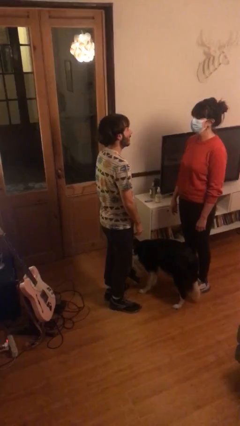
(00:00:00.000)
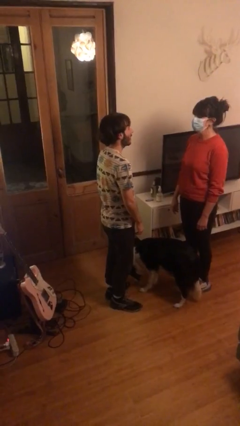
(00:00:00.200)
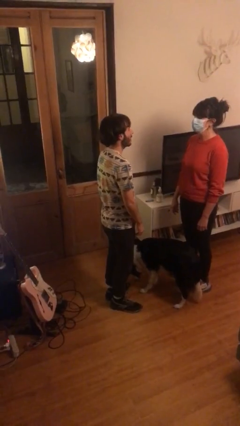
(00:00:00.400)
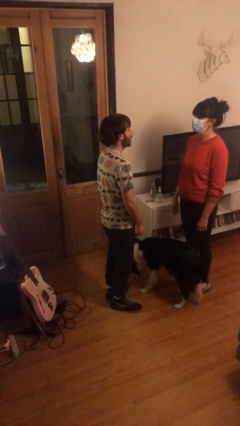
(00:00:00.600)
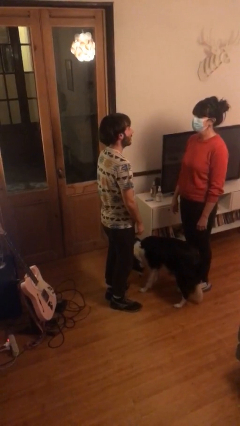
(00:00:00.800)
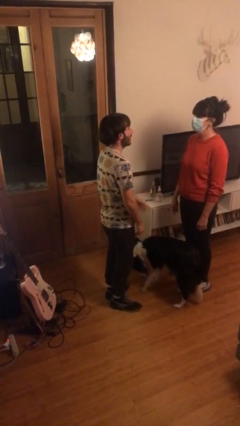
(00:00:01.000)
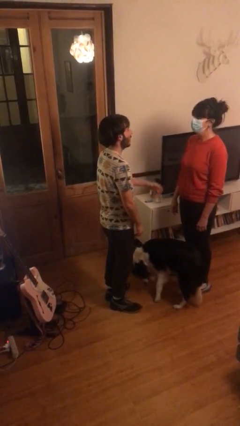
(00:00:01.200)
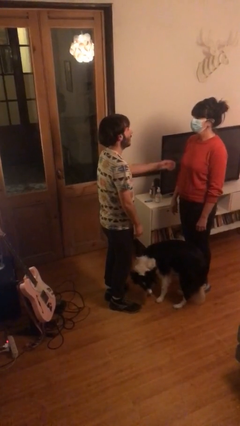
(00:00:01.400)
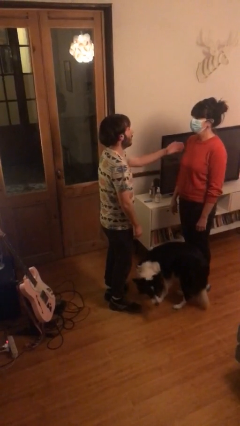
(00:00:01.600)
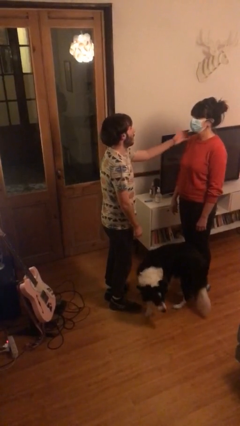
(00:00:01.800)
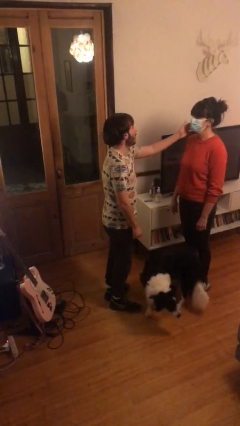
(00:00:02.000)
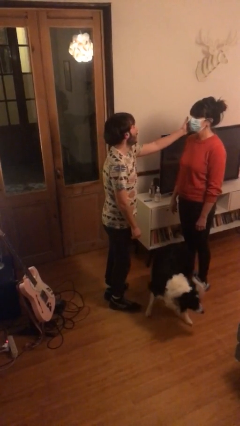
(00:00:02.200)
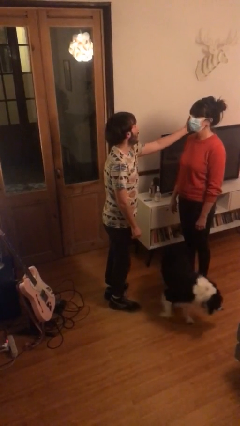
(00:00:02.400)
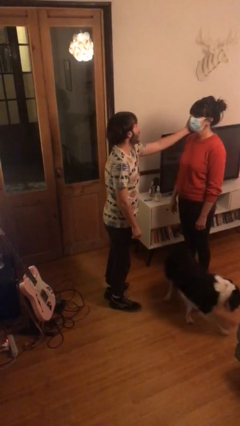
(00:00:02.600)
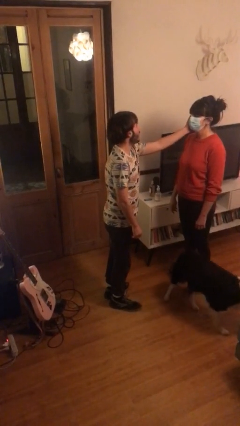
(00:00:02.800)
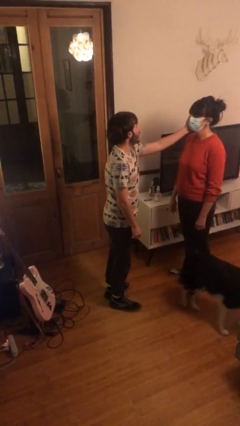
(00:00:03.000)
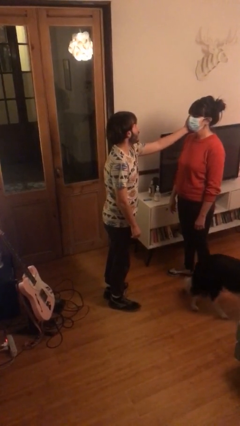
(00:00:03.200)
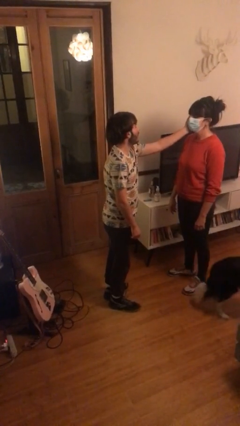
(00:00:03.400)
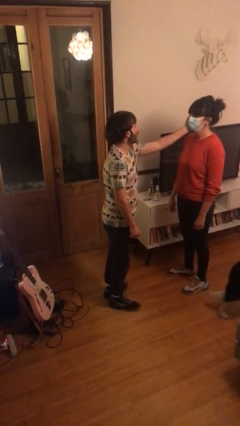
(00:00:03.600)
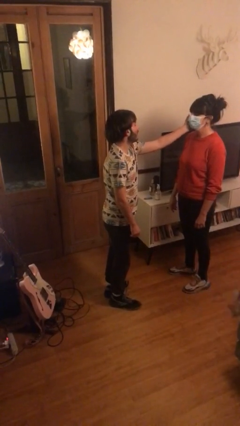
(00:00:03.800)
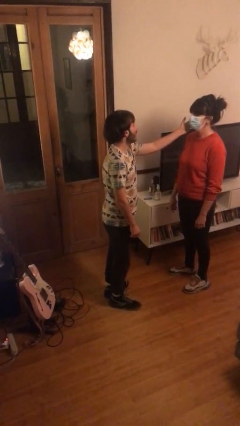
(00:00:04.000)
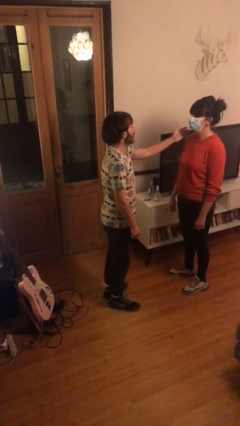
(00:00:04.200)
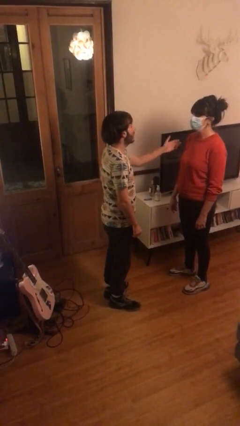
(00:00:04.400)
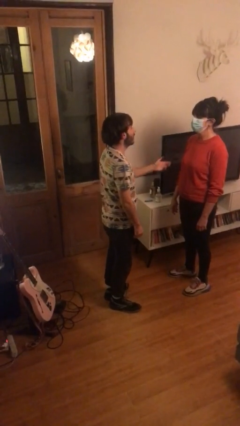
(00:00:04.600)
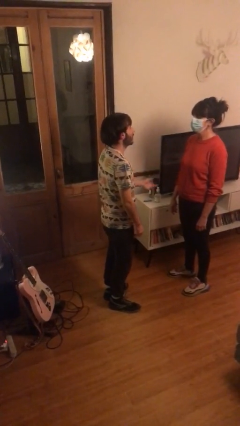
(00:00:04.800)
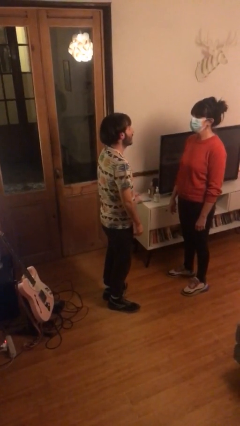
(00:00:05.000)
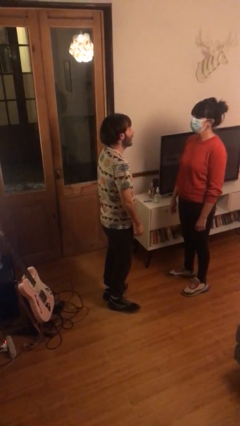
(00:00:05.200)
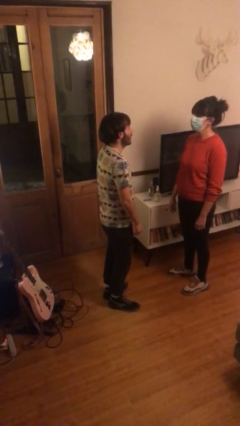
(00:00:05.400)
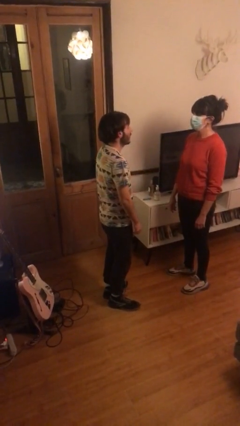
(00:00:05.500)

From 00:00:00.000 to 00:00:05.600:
person touches face of person

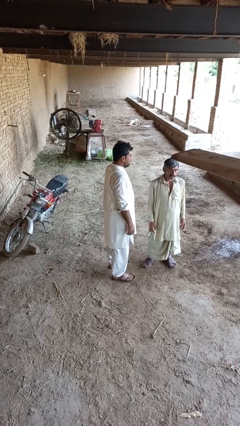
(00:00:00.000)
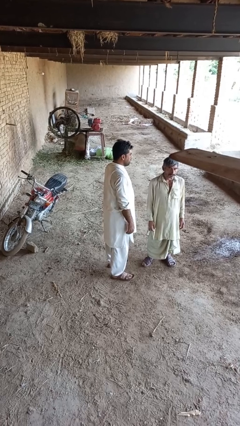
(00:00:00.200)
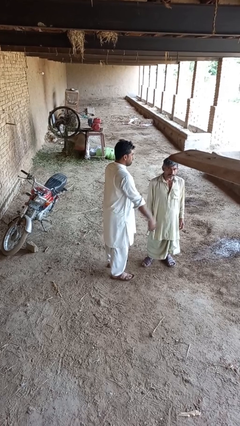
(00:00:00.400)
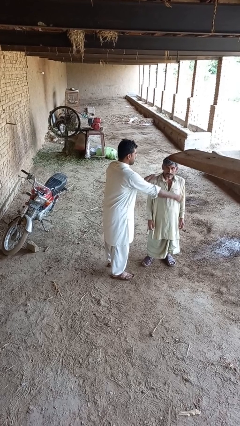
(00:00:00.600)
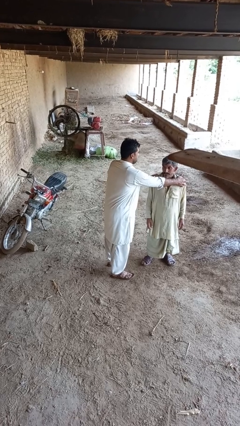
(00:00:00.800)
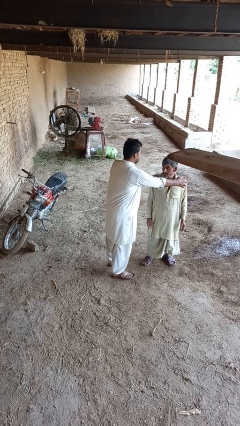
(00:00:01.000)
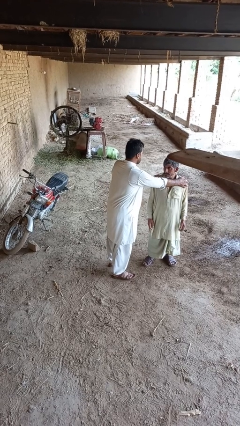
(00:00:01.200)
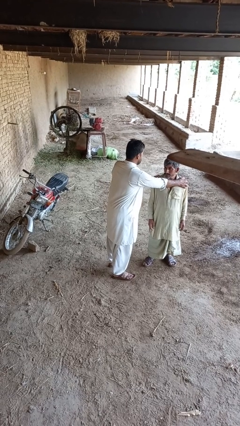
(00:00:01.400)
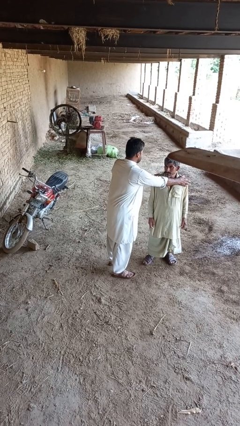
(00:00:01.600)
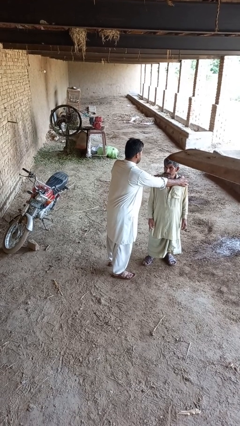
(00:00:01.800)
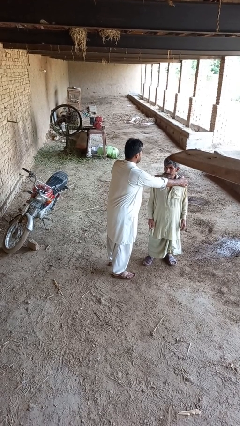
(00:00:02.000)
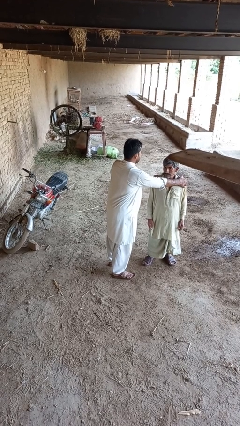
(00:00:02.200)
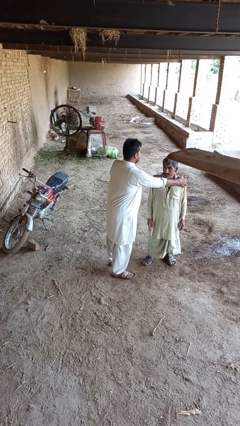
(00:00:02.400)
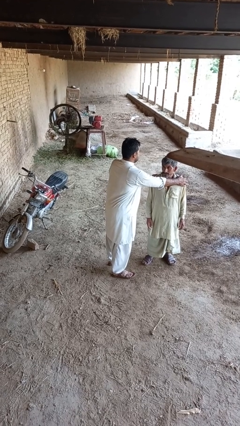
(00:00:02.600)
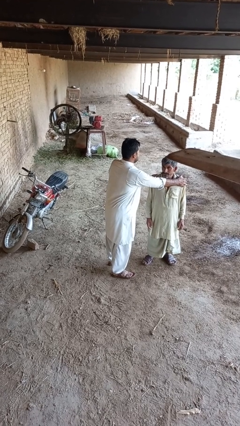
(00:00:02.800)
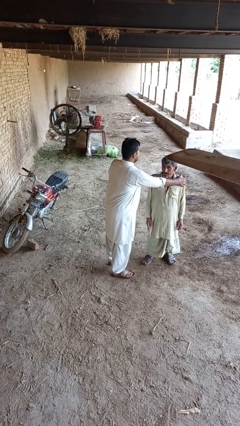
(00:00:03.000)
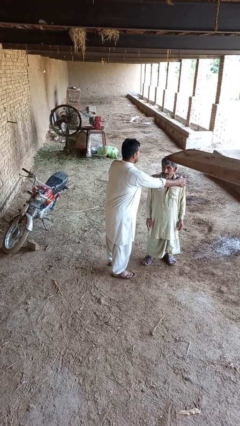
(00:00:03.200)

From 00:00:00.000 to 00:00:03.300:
person grabs person by shoulder

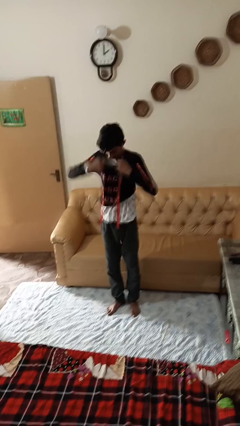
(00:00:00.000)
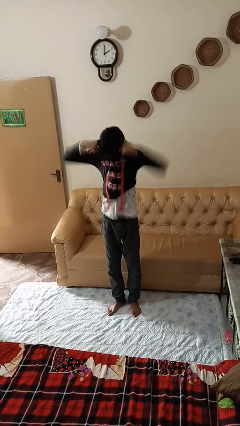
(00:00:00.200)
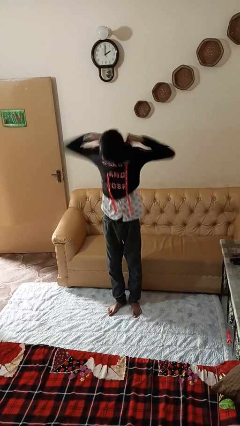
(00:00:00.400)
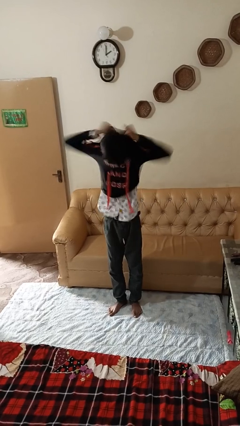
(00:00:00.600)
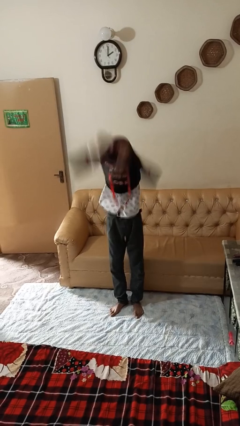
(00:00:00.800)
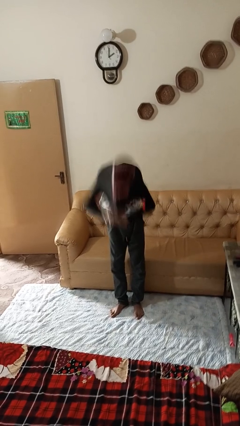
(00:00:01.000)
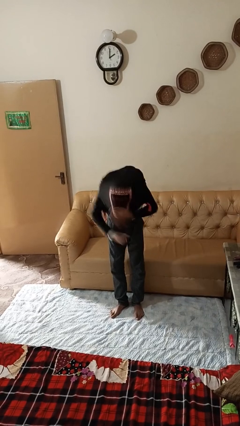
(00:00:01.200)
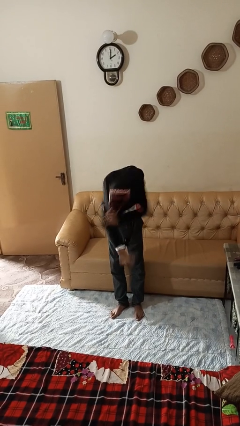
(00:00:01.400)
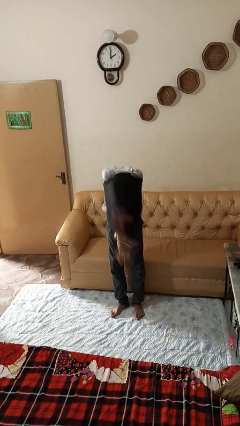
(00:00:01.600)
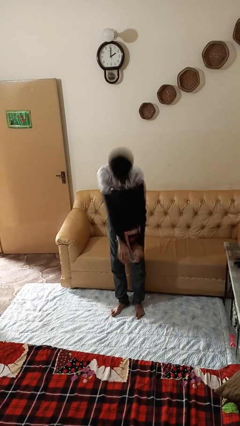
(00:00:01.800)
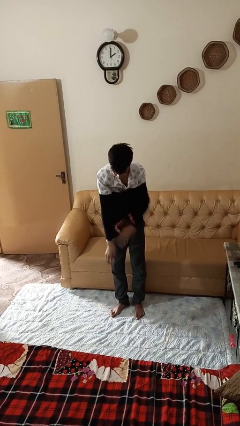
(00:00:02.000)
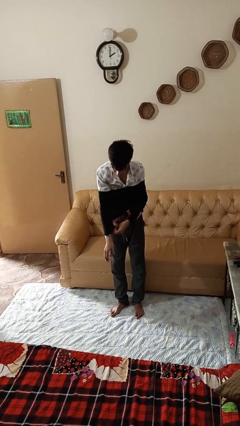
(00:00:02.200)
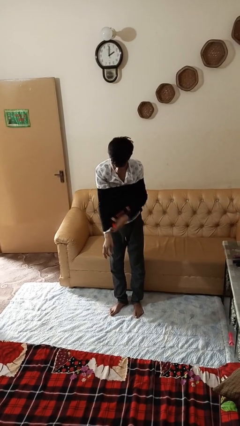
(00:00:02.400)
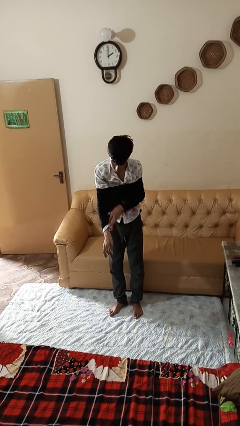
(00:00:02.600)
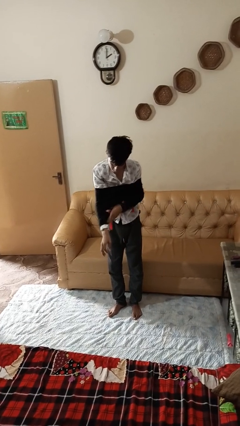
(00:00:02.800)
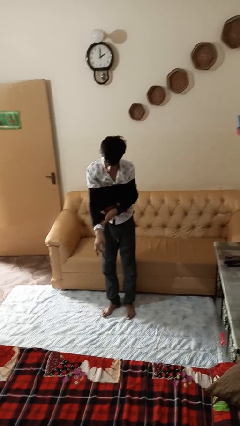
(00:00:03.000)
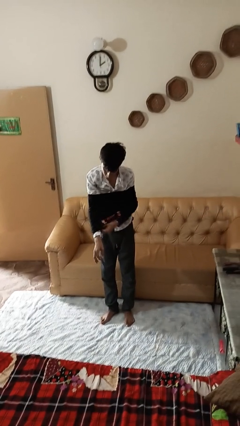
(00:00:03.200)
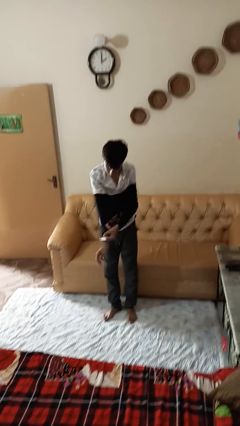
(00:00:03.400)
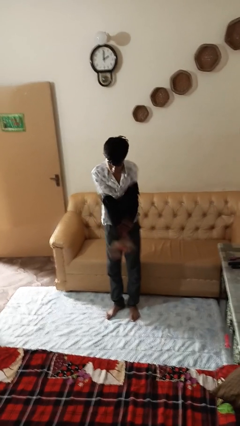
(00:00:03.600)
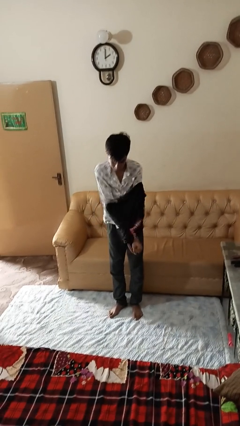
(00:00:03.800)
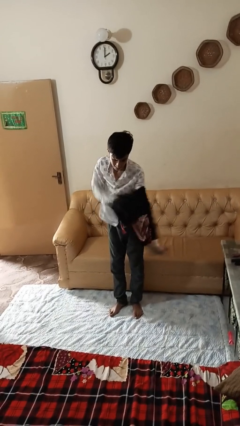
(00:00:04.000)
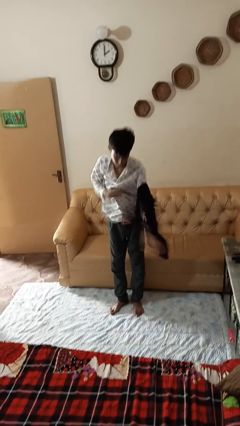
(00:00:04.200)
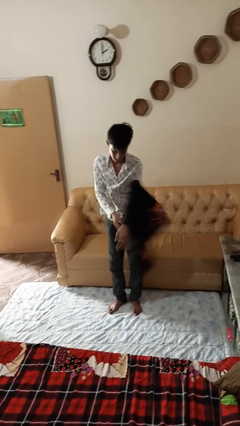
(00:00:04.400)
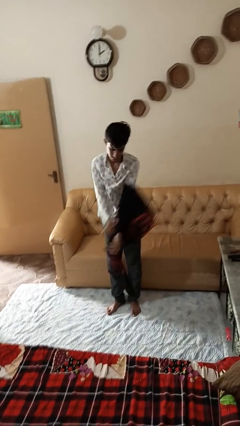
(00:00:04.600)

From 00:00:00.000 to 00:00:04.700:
person takes off shirt

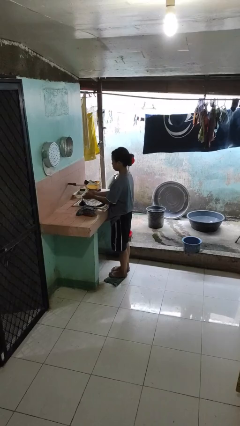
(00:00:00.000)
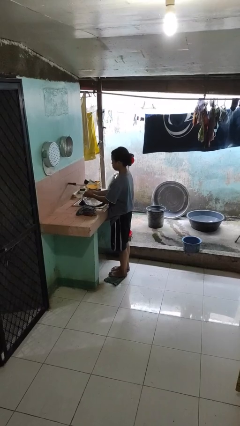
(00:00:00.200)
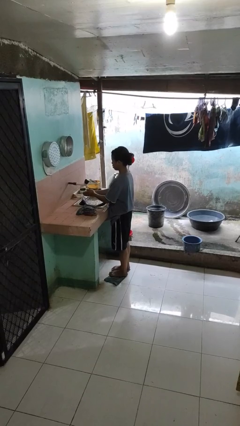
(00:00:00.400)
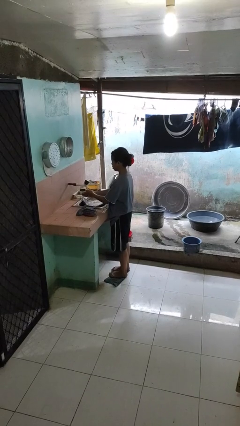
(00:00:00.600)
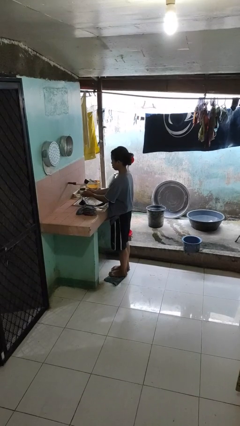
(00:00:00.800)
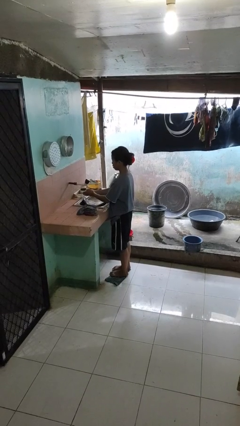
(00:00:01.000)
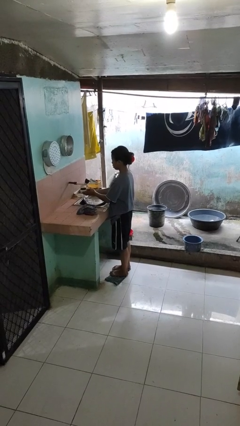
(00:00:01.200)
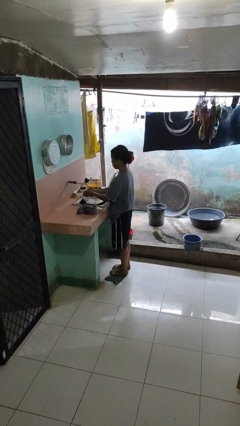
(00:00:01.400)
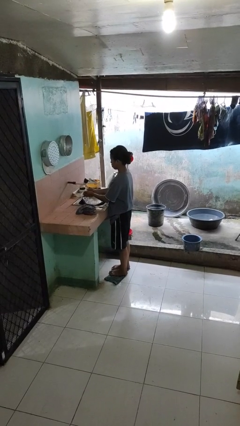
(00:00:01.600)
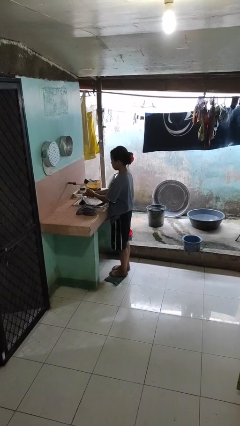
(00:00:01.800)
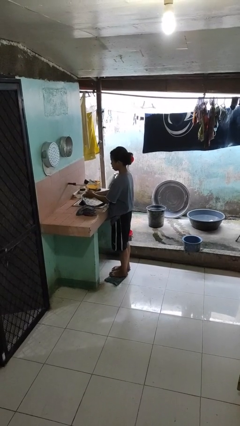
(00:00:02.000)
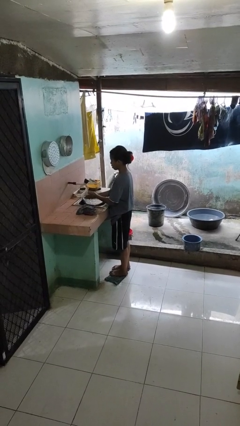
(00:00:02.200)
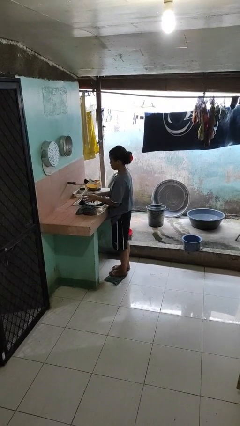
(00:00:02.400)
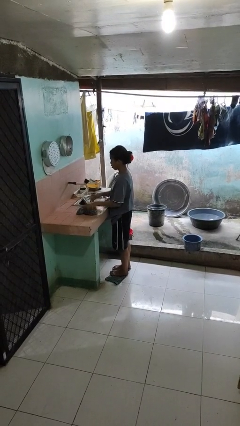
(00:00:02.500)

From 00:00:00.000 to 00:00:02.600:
person washes hands

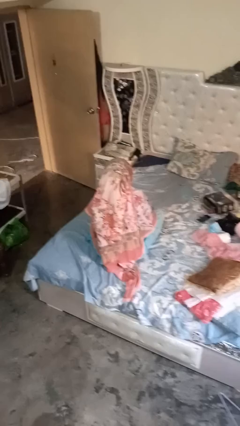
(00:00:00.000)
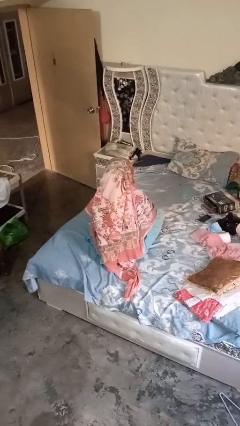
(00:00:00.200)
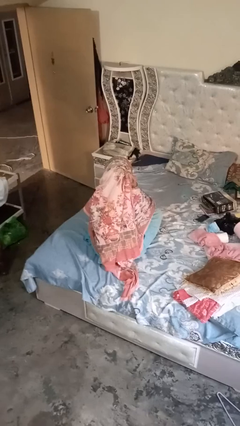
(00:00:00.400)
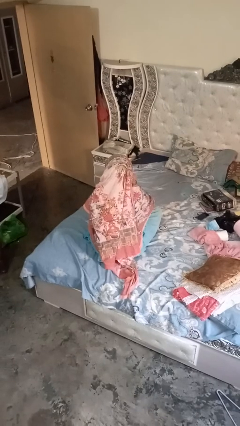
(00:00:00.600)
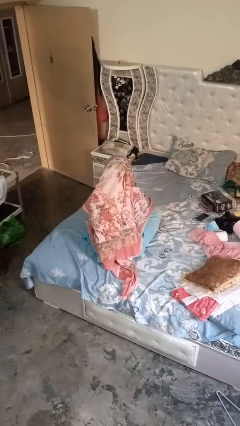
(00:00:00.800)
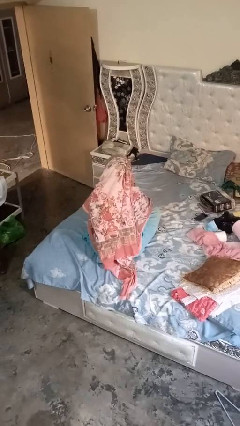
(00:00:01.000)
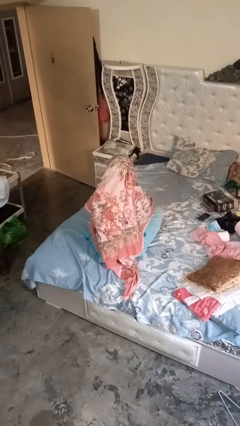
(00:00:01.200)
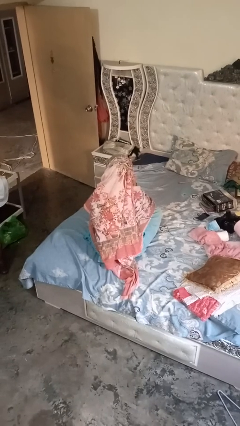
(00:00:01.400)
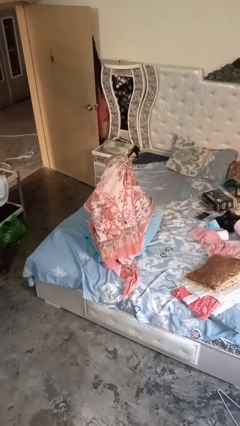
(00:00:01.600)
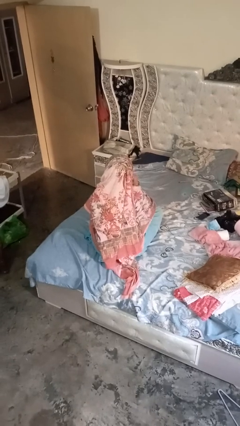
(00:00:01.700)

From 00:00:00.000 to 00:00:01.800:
person gestures listen closely
